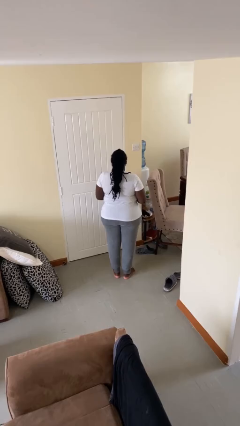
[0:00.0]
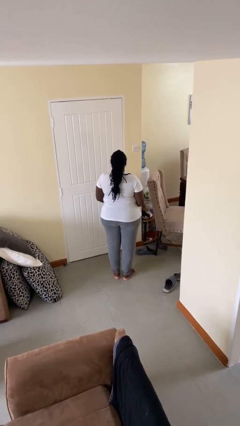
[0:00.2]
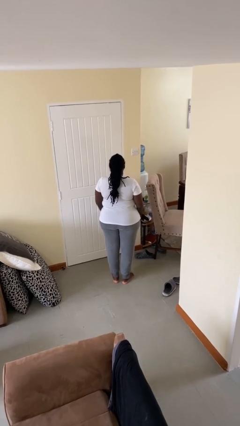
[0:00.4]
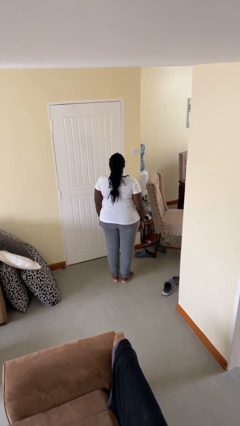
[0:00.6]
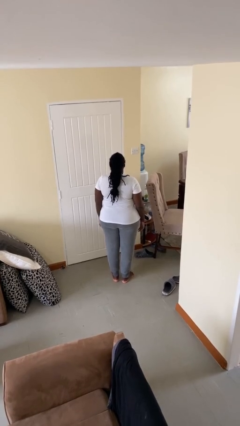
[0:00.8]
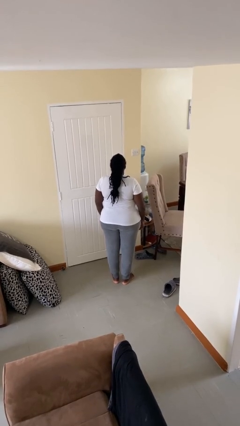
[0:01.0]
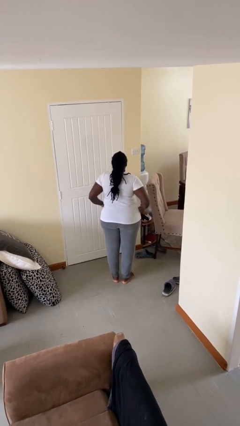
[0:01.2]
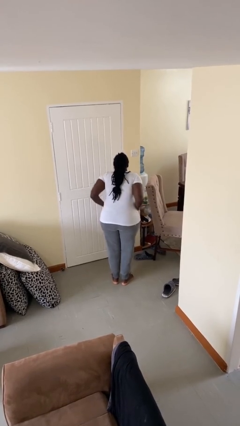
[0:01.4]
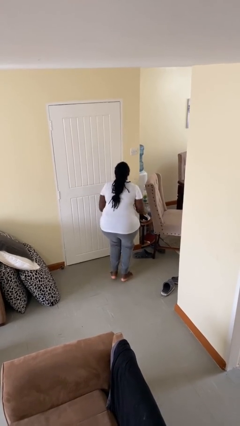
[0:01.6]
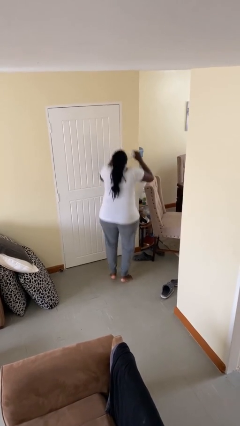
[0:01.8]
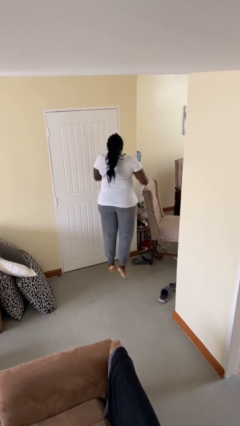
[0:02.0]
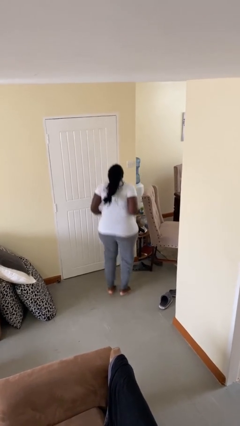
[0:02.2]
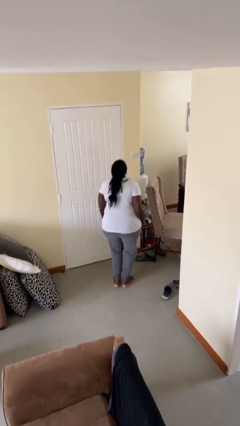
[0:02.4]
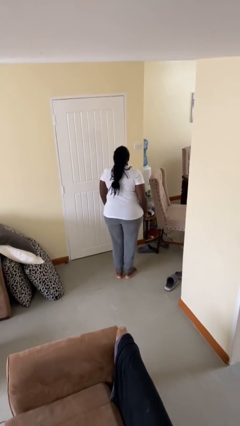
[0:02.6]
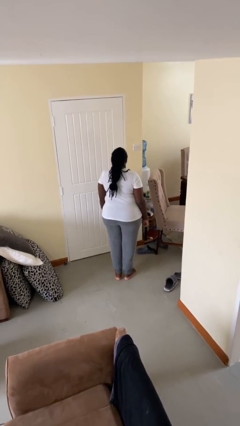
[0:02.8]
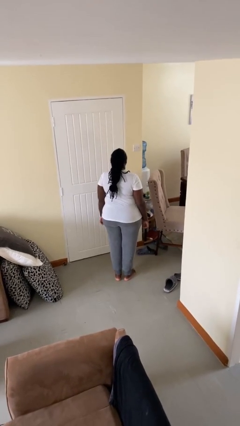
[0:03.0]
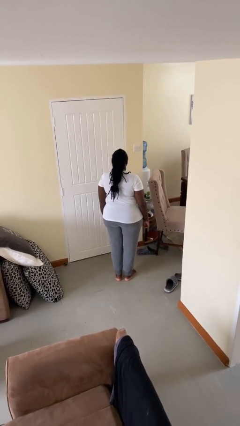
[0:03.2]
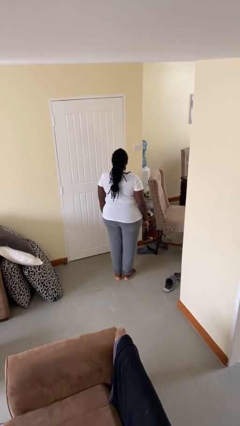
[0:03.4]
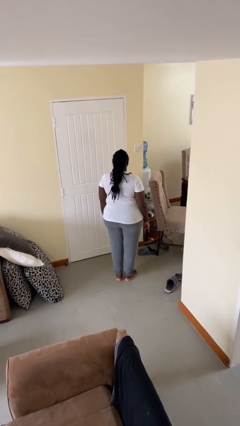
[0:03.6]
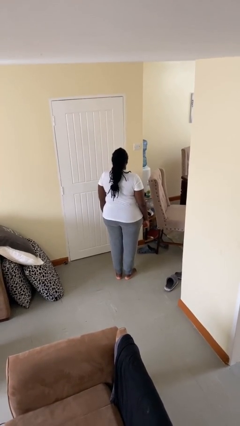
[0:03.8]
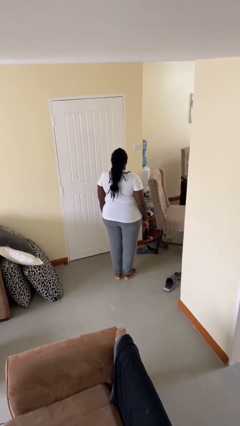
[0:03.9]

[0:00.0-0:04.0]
person jumps

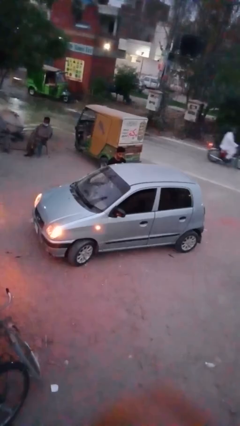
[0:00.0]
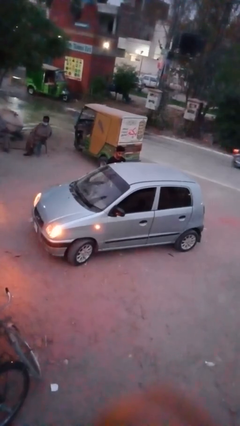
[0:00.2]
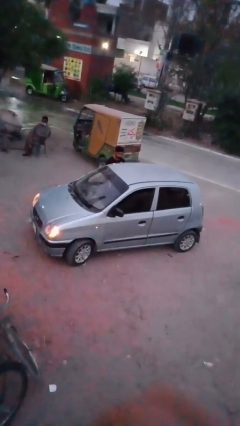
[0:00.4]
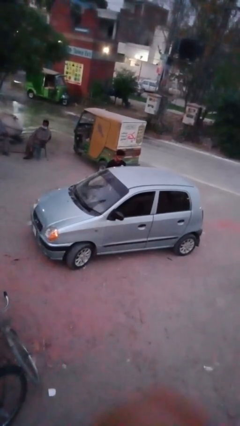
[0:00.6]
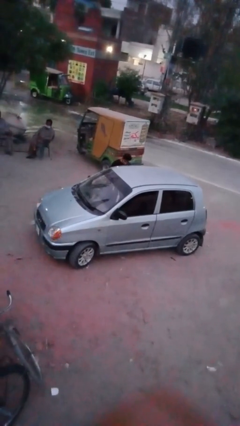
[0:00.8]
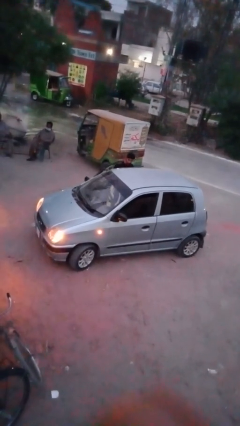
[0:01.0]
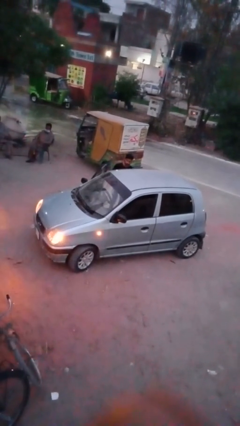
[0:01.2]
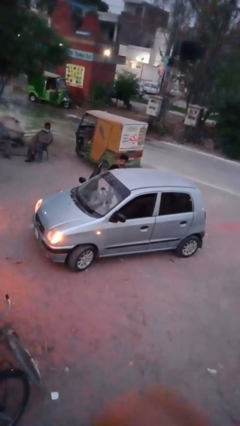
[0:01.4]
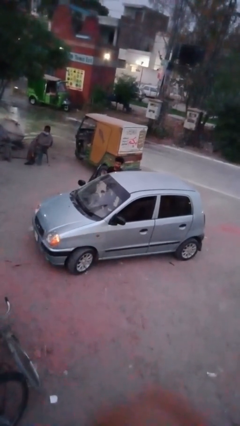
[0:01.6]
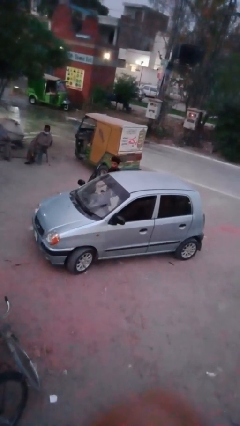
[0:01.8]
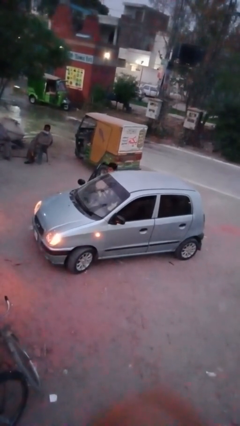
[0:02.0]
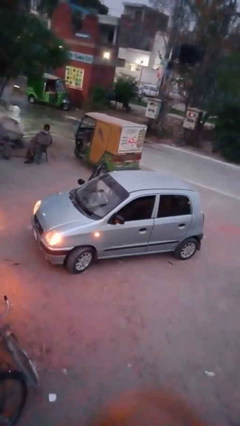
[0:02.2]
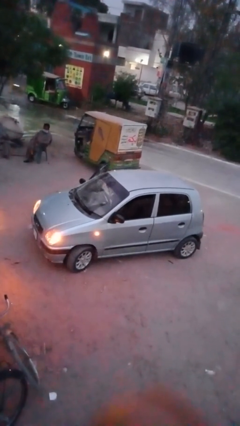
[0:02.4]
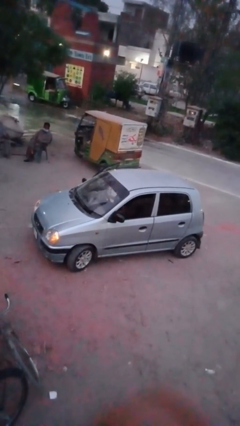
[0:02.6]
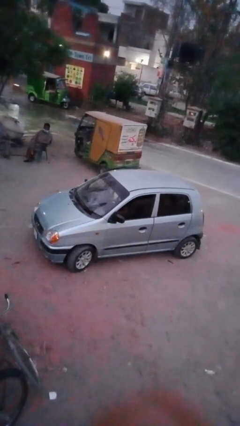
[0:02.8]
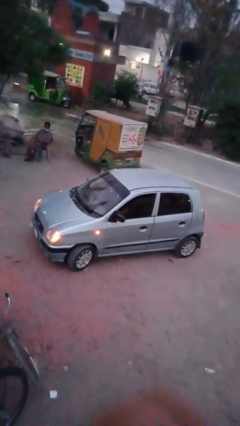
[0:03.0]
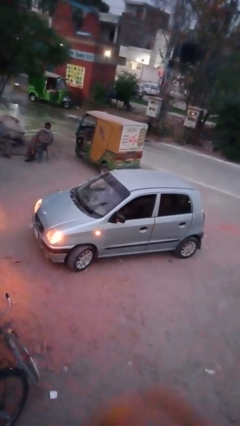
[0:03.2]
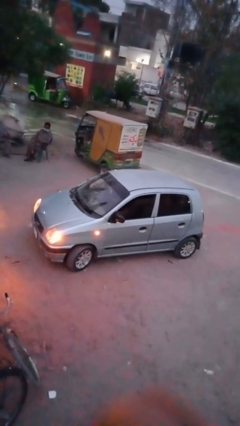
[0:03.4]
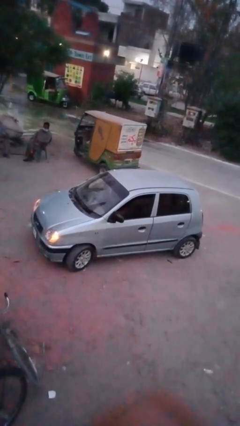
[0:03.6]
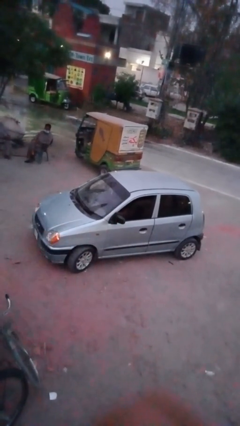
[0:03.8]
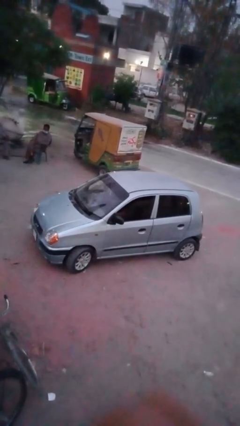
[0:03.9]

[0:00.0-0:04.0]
car picks up person

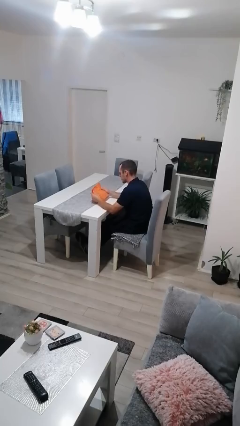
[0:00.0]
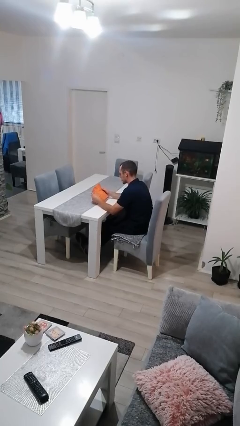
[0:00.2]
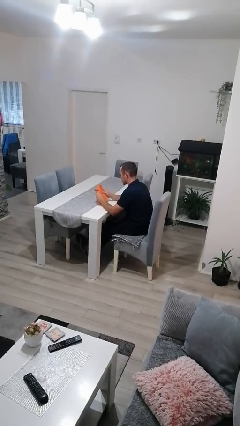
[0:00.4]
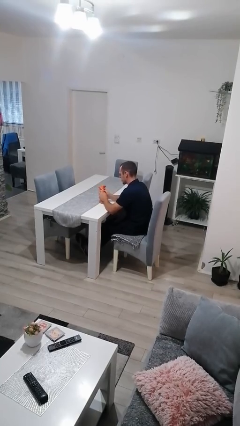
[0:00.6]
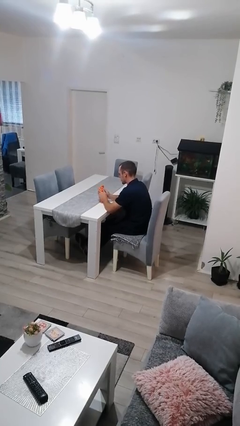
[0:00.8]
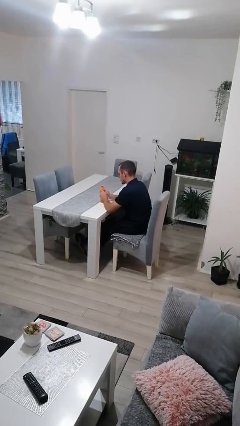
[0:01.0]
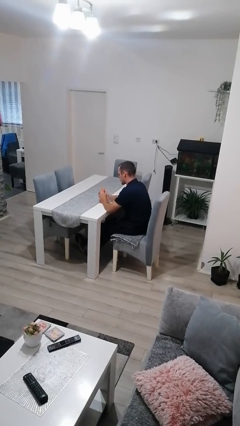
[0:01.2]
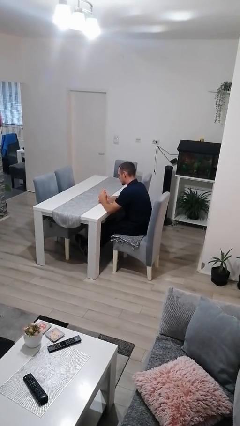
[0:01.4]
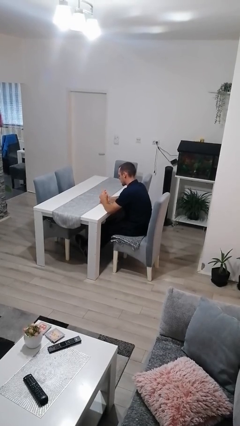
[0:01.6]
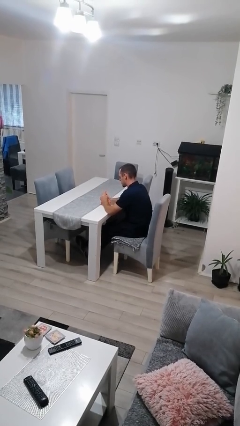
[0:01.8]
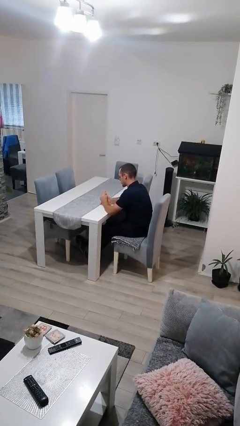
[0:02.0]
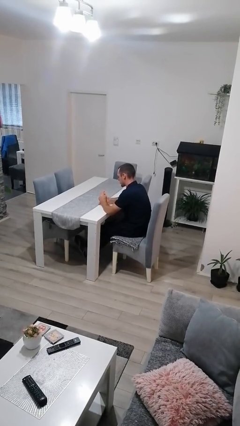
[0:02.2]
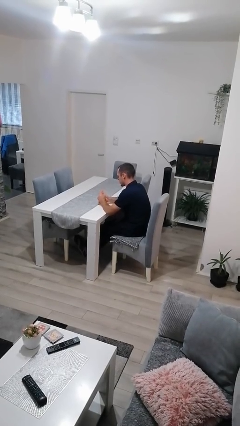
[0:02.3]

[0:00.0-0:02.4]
person crumples paper

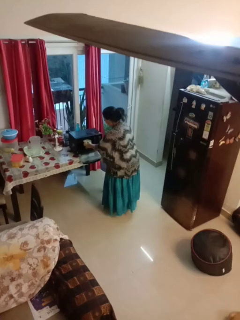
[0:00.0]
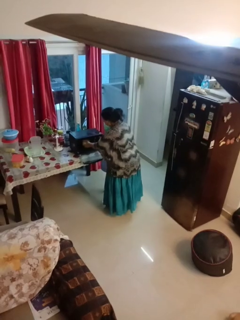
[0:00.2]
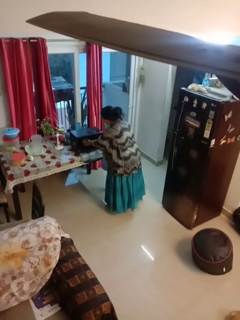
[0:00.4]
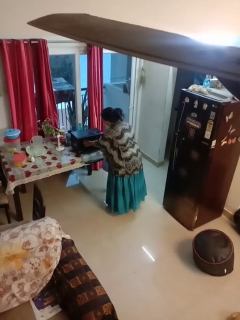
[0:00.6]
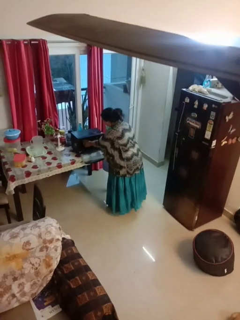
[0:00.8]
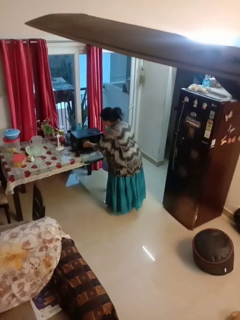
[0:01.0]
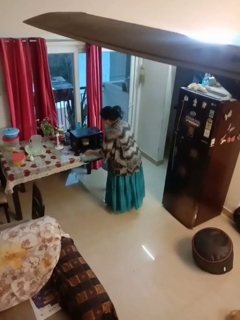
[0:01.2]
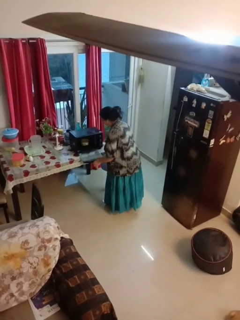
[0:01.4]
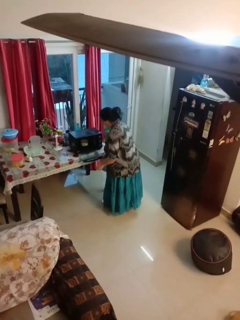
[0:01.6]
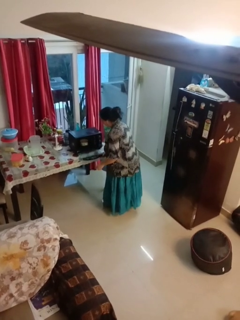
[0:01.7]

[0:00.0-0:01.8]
person puts object into microwave

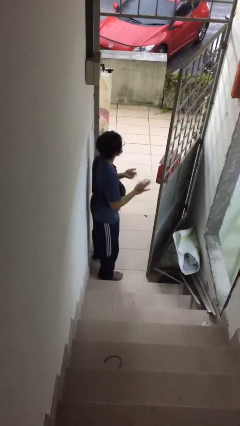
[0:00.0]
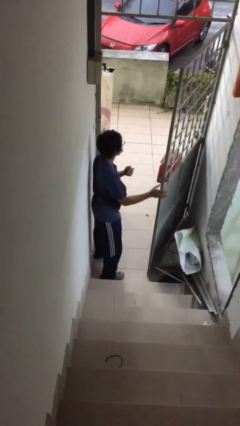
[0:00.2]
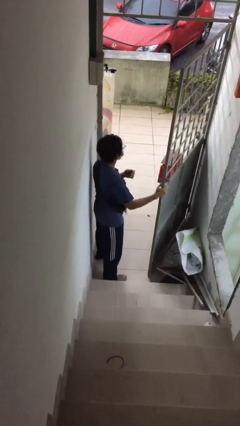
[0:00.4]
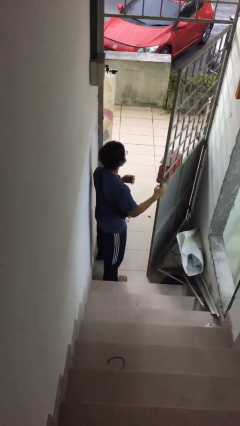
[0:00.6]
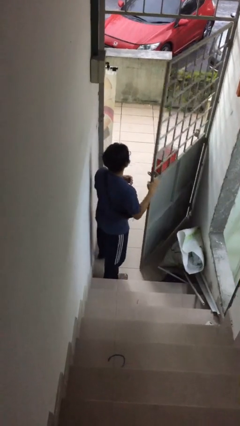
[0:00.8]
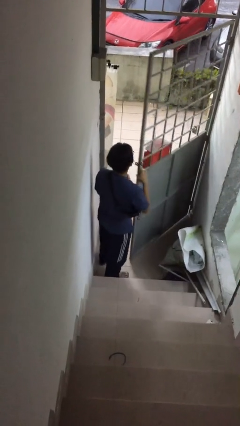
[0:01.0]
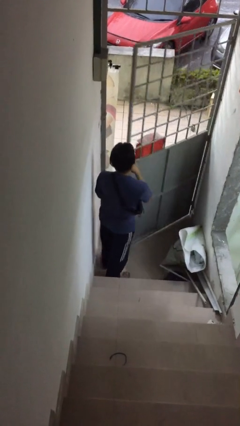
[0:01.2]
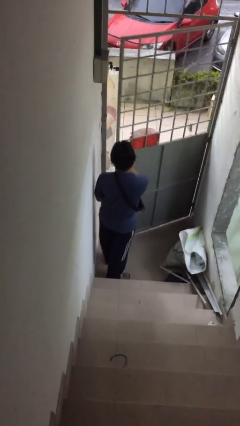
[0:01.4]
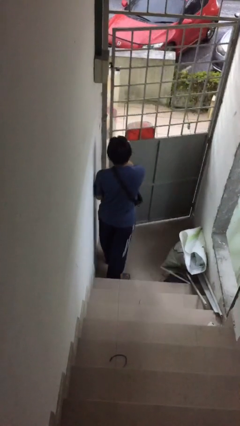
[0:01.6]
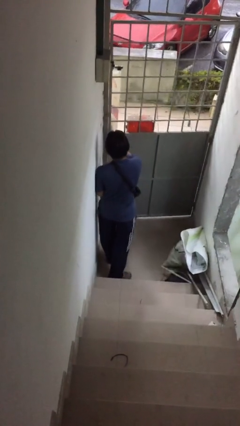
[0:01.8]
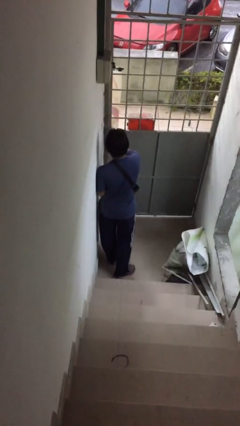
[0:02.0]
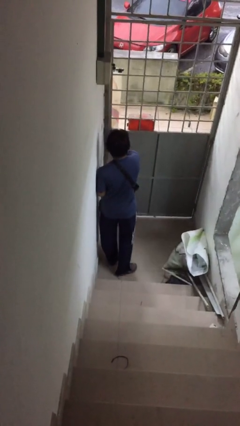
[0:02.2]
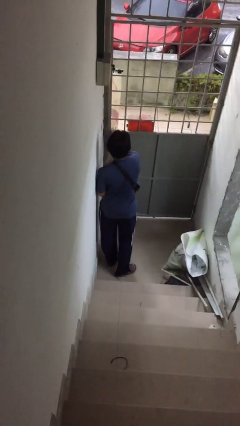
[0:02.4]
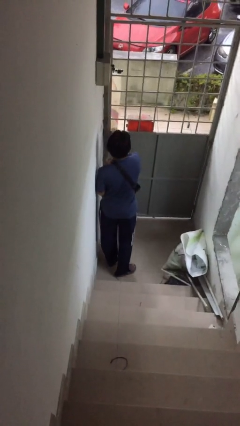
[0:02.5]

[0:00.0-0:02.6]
person closes facility door

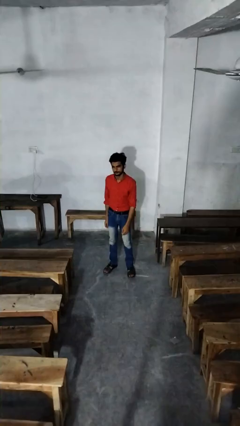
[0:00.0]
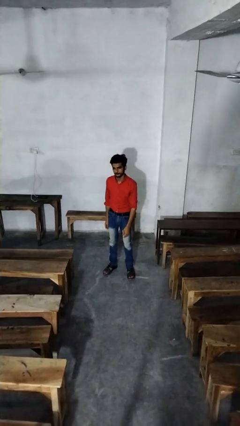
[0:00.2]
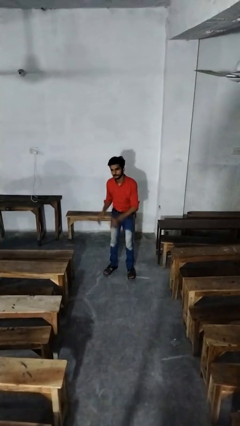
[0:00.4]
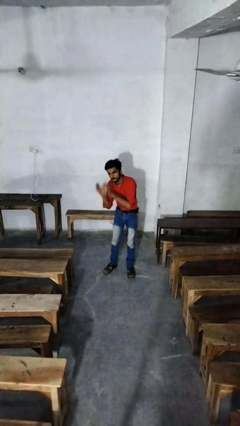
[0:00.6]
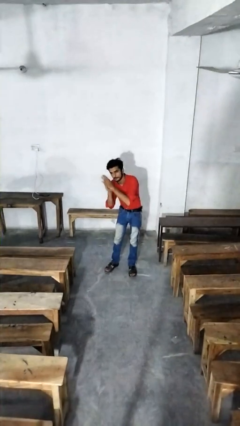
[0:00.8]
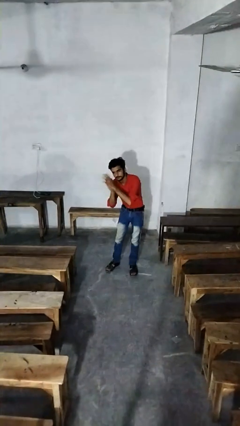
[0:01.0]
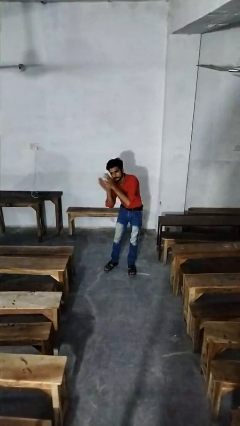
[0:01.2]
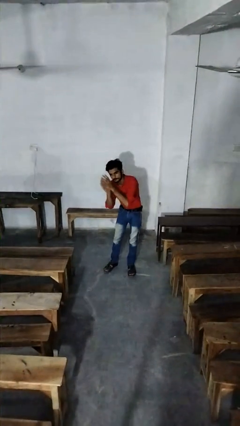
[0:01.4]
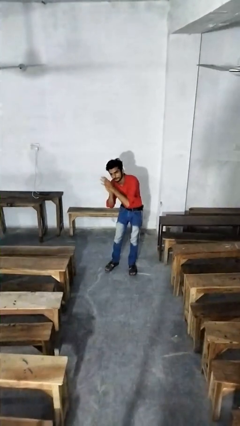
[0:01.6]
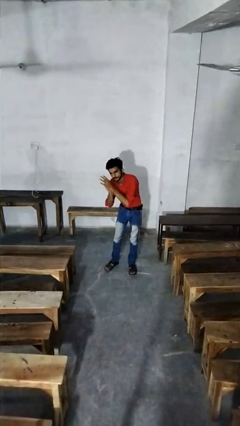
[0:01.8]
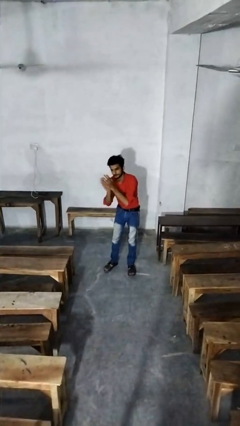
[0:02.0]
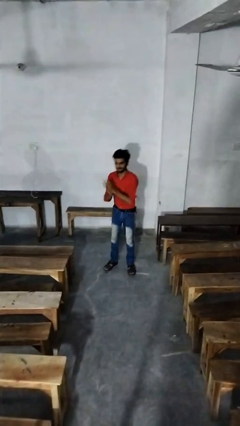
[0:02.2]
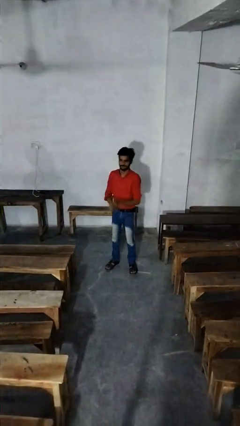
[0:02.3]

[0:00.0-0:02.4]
person claps hands

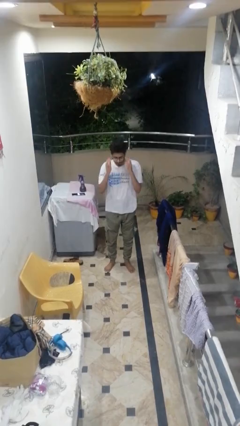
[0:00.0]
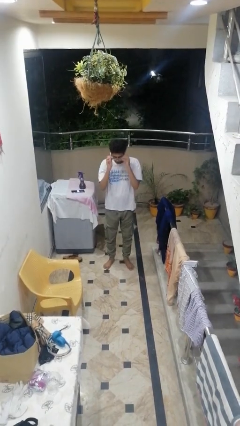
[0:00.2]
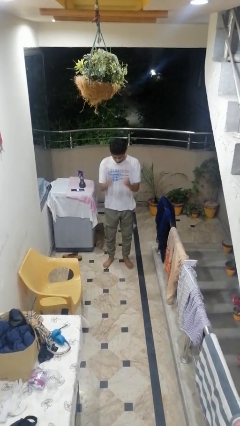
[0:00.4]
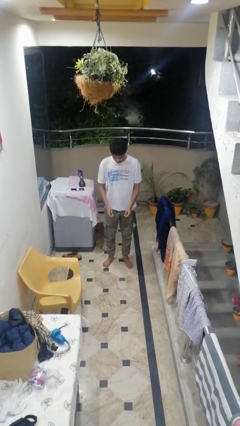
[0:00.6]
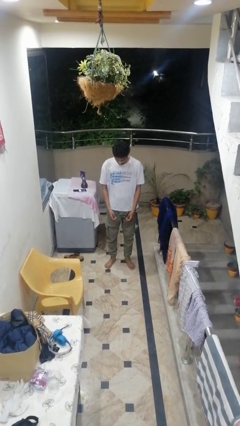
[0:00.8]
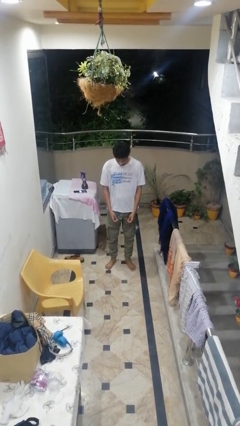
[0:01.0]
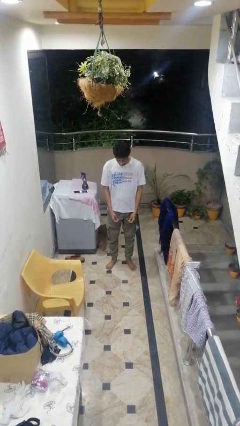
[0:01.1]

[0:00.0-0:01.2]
person takes off glasses
